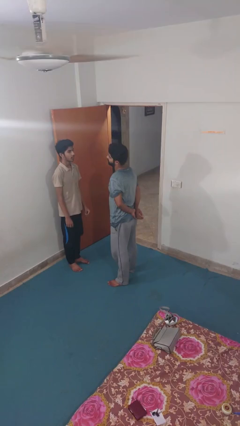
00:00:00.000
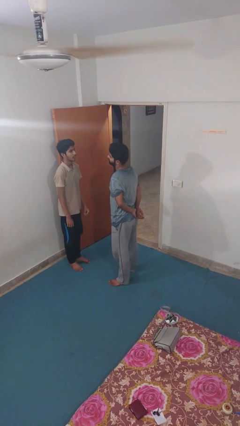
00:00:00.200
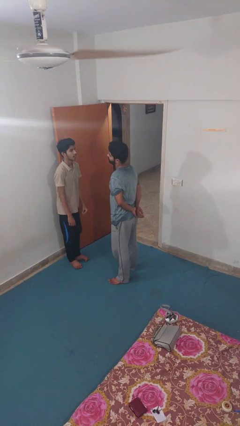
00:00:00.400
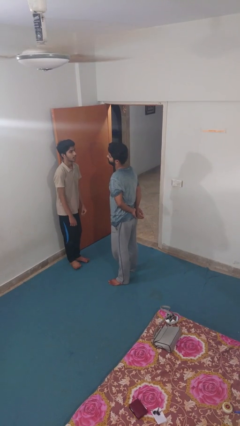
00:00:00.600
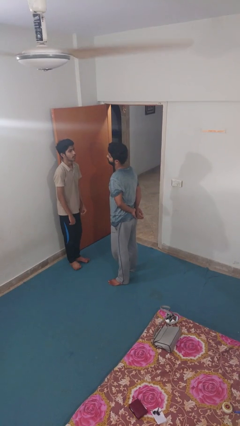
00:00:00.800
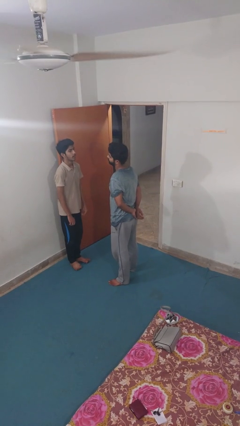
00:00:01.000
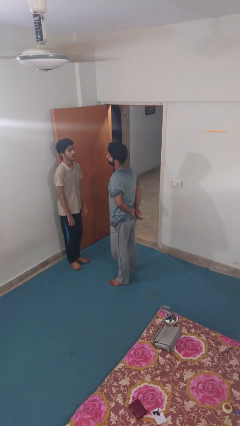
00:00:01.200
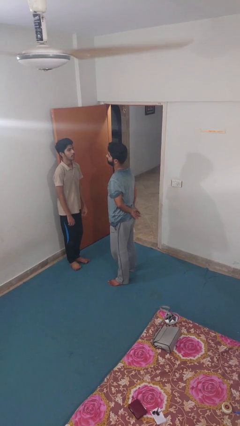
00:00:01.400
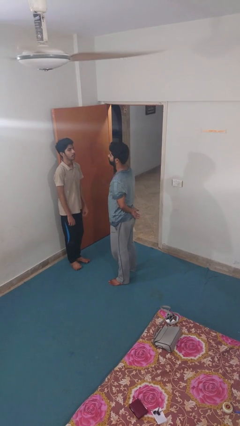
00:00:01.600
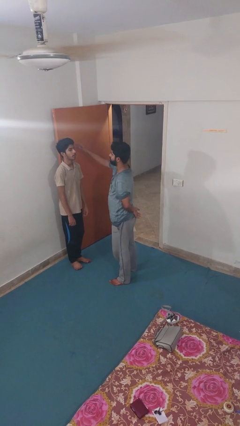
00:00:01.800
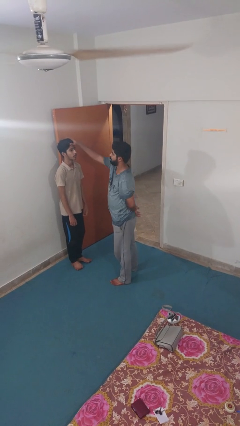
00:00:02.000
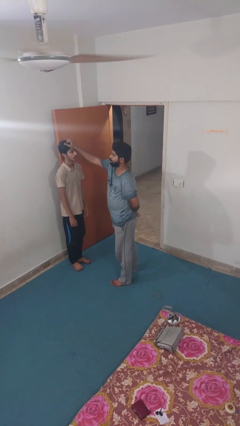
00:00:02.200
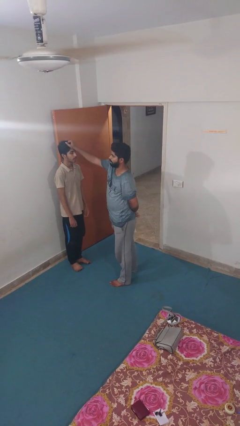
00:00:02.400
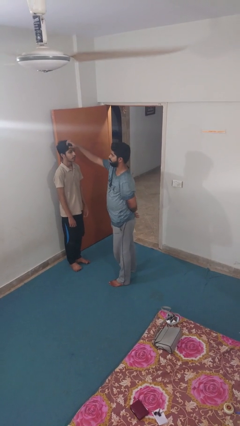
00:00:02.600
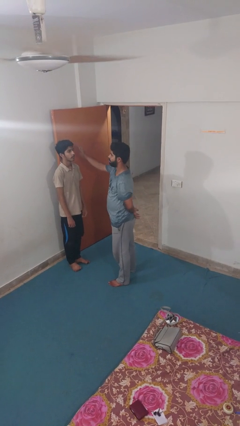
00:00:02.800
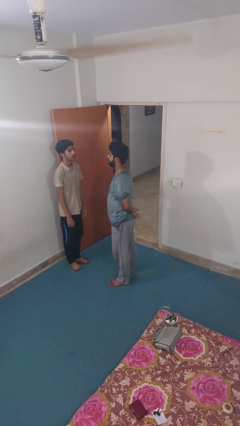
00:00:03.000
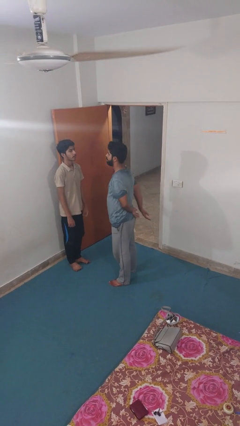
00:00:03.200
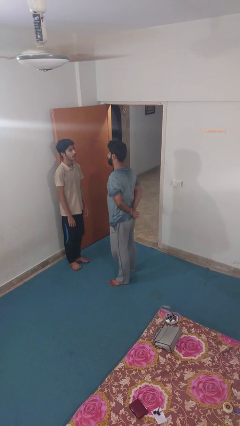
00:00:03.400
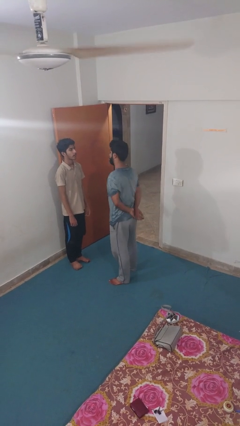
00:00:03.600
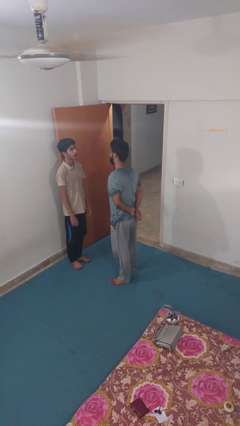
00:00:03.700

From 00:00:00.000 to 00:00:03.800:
person grabs person by hair

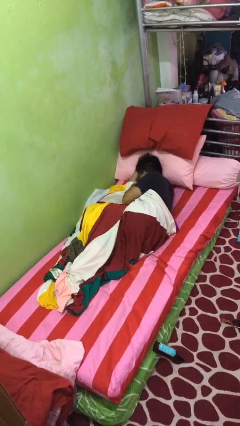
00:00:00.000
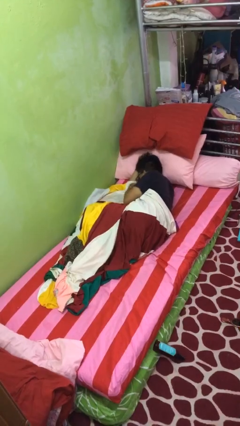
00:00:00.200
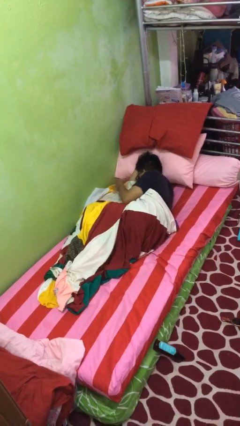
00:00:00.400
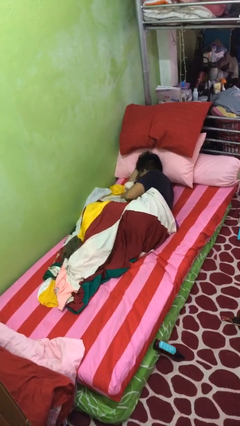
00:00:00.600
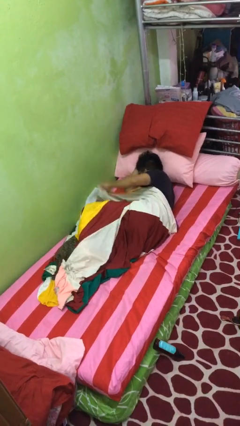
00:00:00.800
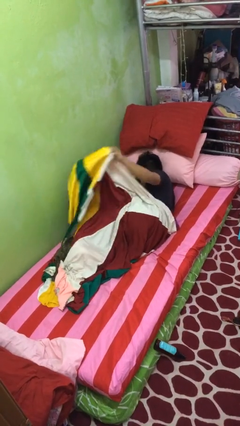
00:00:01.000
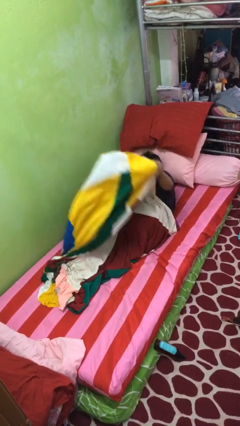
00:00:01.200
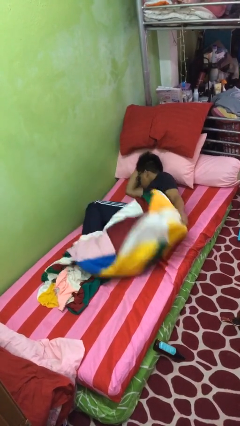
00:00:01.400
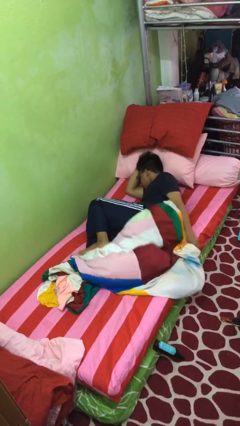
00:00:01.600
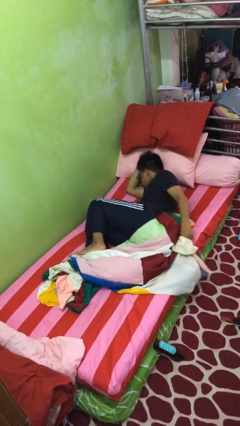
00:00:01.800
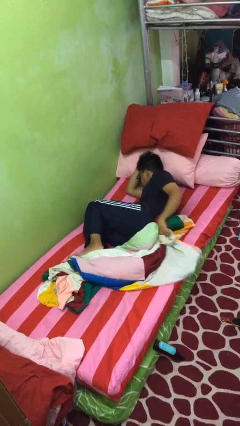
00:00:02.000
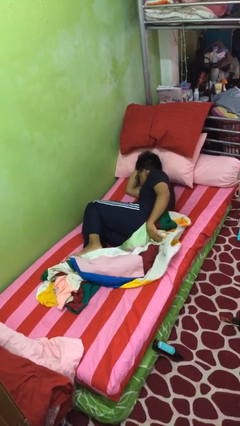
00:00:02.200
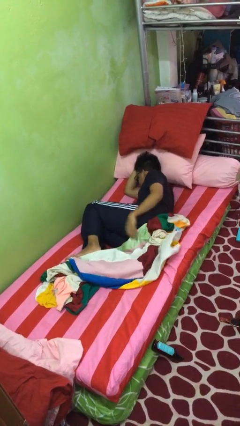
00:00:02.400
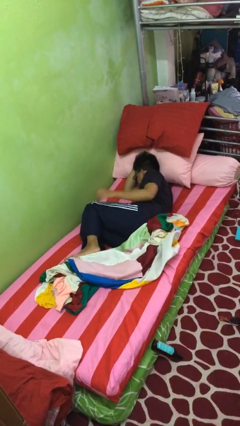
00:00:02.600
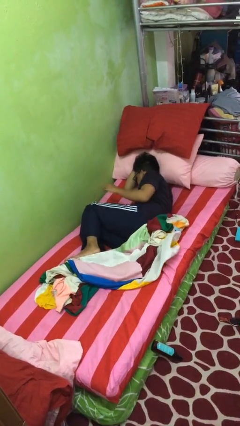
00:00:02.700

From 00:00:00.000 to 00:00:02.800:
person uncovers with blanket

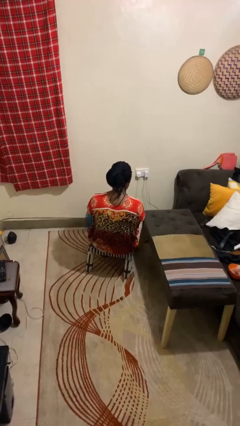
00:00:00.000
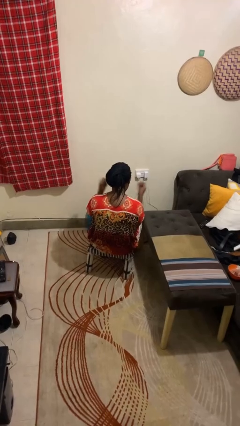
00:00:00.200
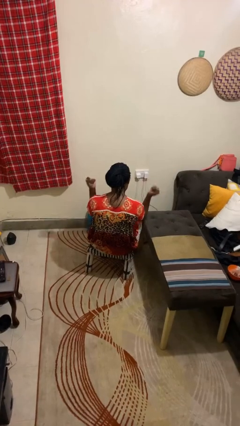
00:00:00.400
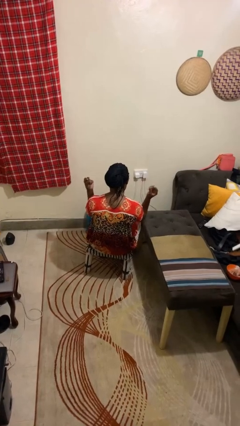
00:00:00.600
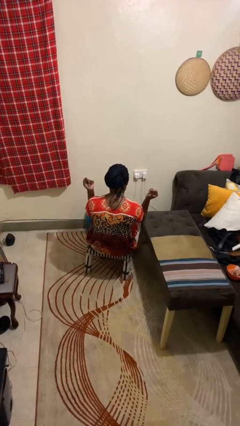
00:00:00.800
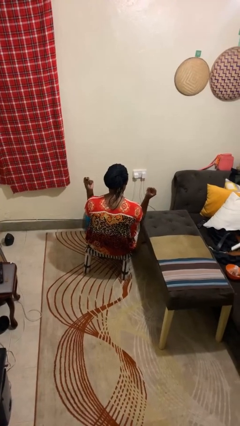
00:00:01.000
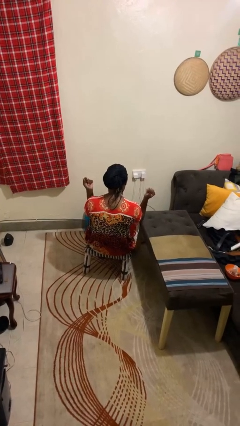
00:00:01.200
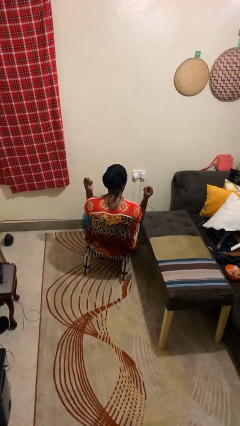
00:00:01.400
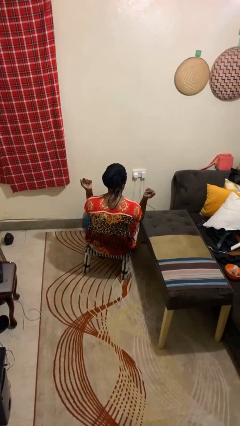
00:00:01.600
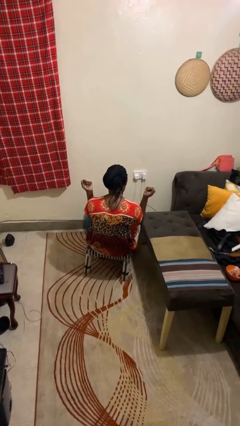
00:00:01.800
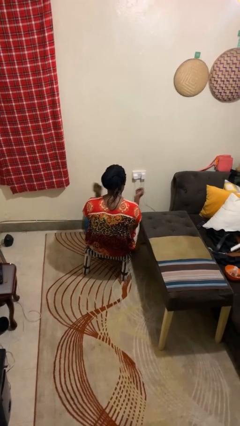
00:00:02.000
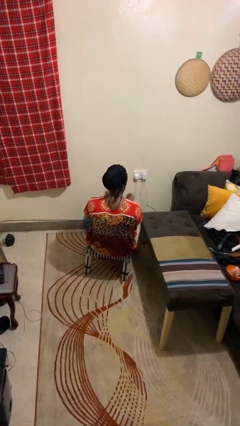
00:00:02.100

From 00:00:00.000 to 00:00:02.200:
person snaps fingers

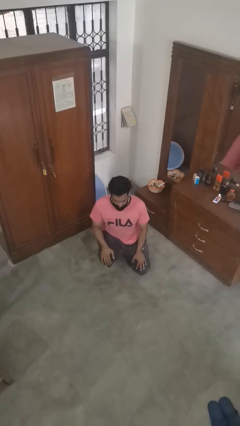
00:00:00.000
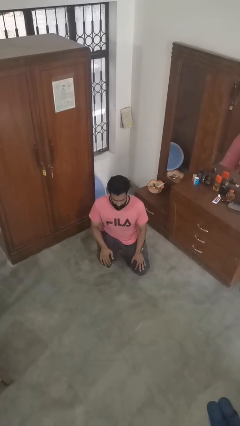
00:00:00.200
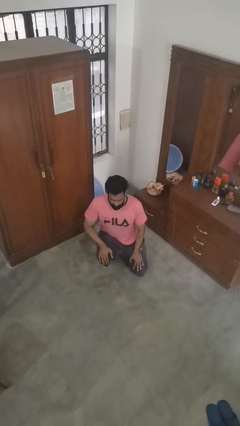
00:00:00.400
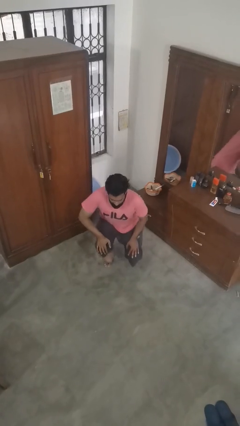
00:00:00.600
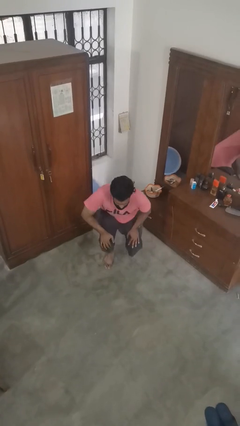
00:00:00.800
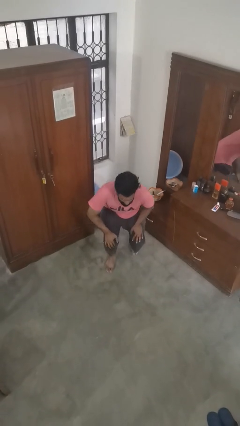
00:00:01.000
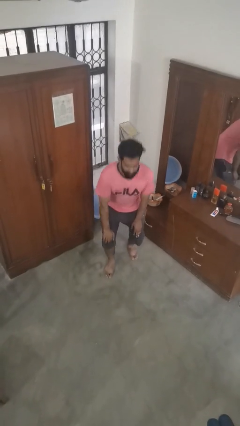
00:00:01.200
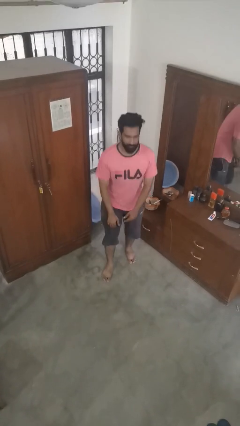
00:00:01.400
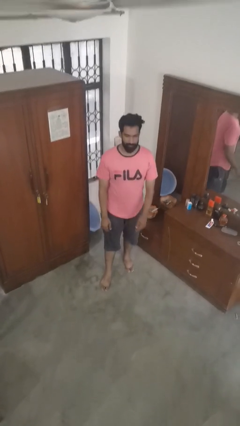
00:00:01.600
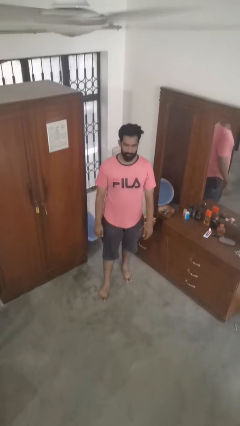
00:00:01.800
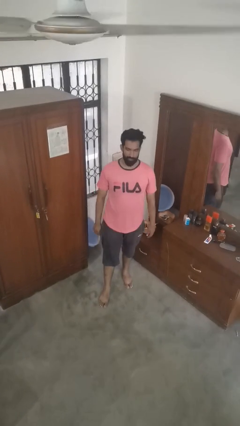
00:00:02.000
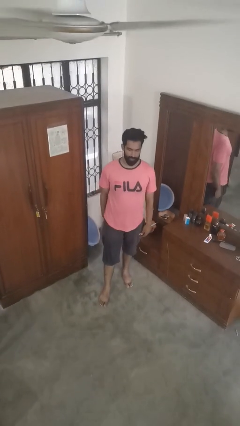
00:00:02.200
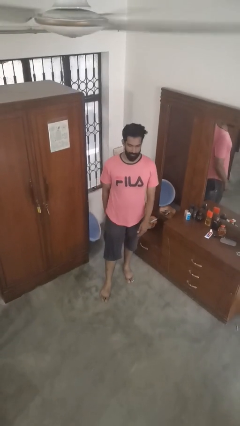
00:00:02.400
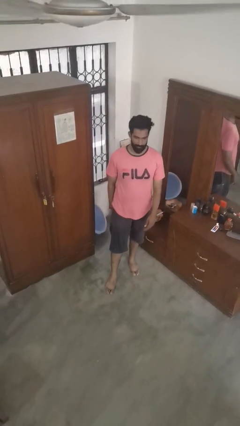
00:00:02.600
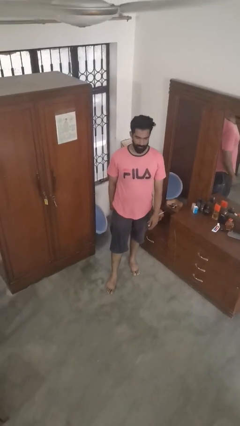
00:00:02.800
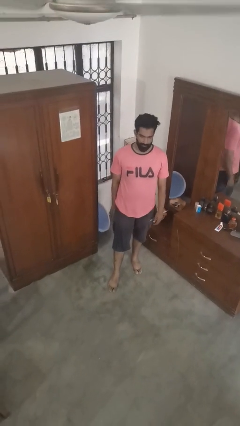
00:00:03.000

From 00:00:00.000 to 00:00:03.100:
person stands up from floor

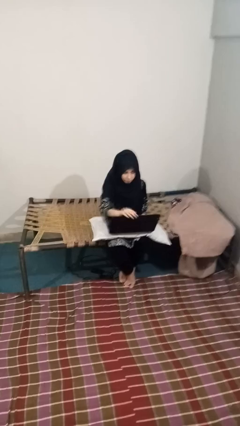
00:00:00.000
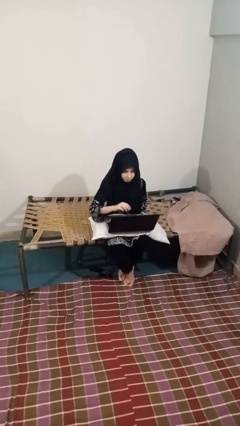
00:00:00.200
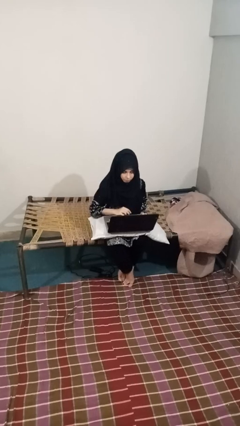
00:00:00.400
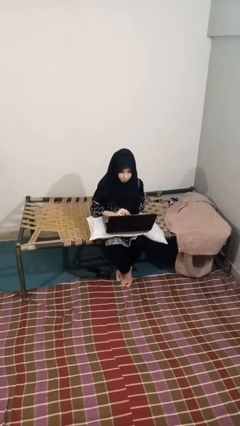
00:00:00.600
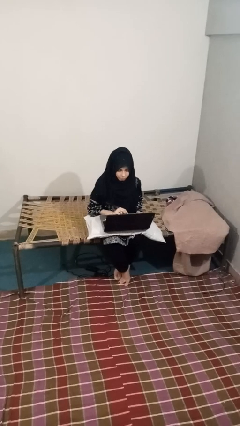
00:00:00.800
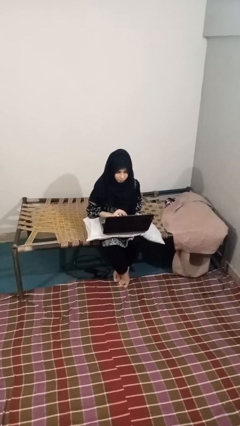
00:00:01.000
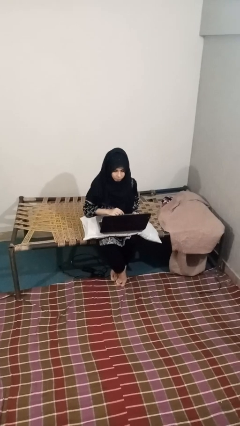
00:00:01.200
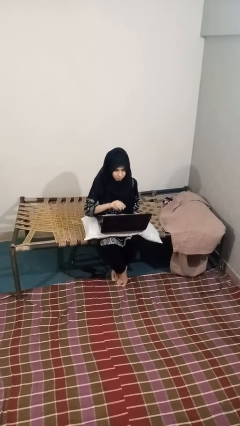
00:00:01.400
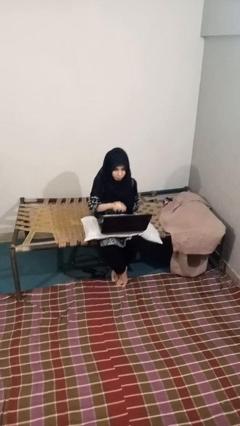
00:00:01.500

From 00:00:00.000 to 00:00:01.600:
person opens laptop

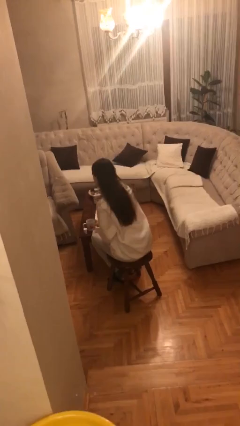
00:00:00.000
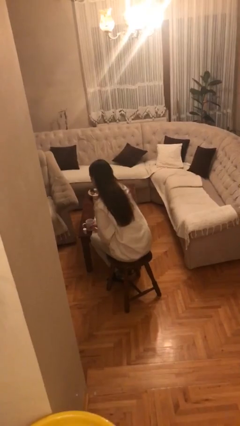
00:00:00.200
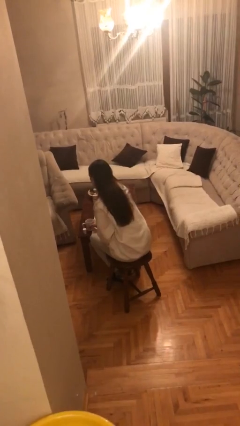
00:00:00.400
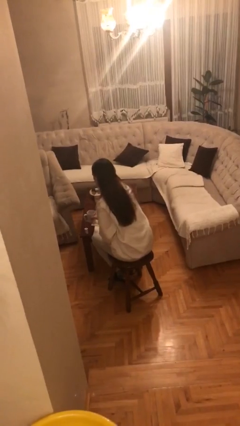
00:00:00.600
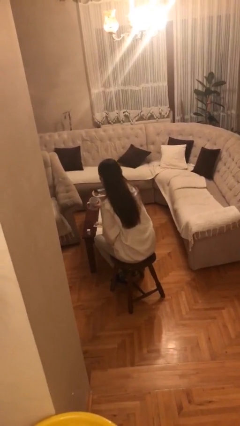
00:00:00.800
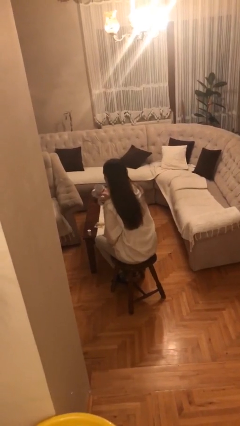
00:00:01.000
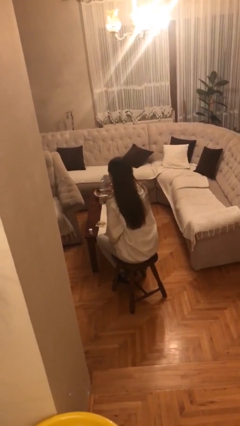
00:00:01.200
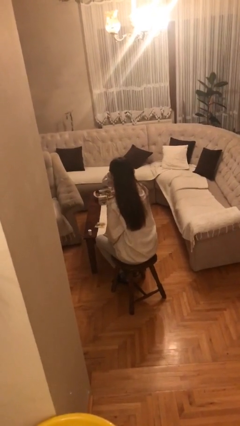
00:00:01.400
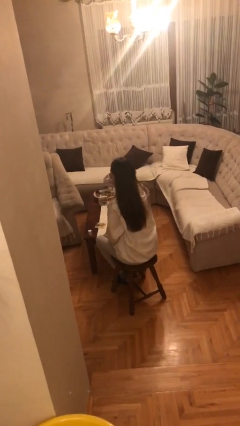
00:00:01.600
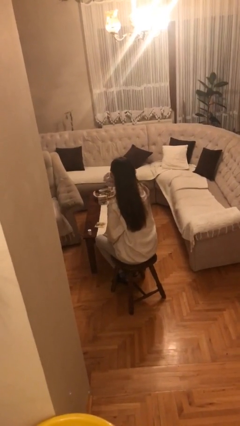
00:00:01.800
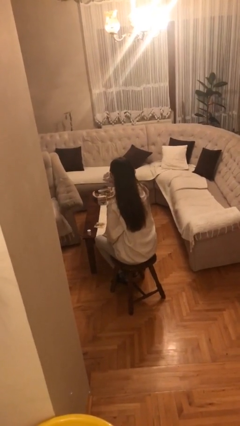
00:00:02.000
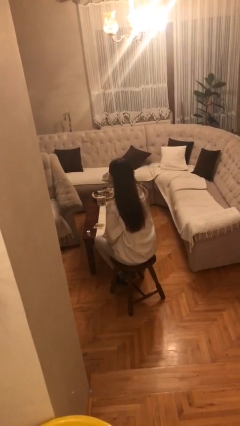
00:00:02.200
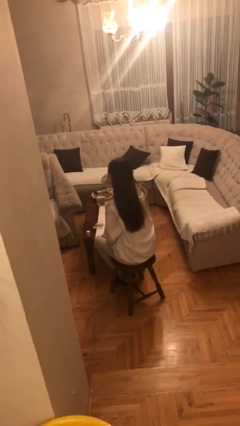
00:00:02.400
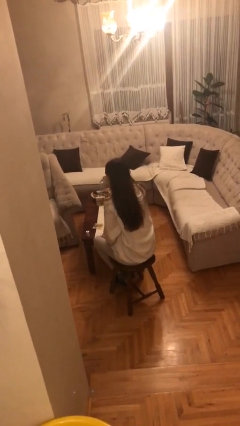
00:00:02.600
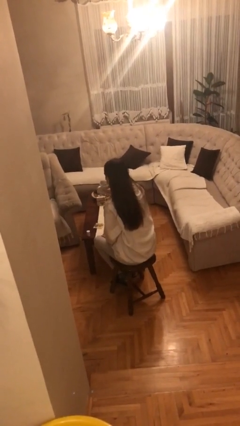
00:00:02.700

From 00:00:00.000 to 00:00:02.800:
person drinks from cup

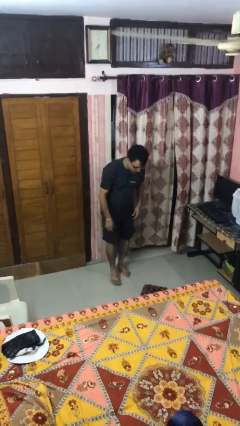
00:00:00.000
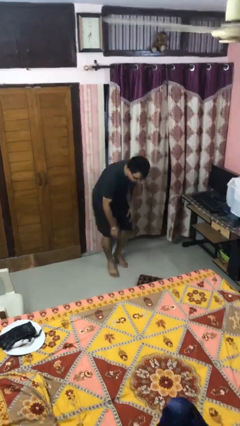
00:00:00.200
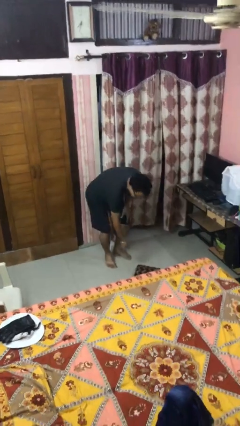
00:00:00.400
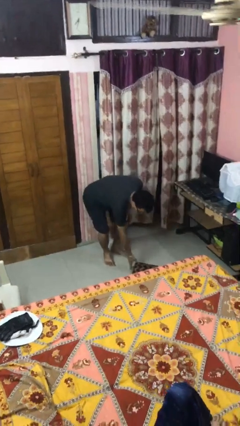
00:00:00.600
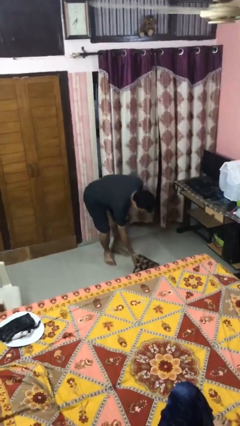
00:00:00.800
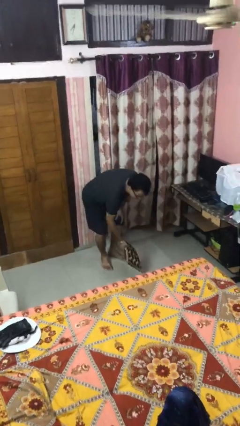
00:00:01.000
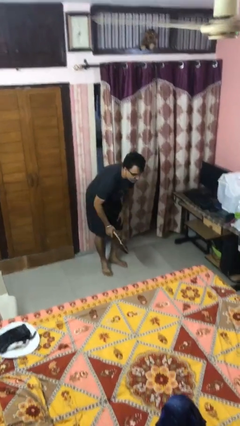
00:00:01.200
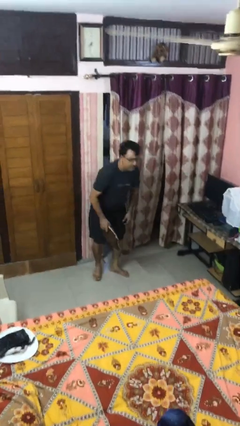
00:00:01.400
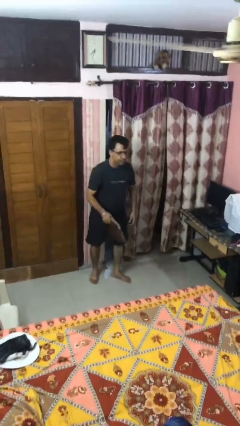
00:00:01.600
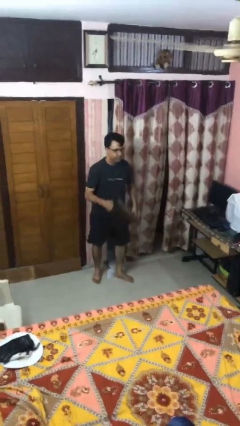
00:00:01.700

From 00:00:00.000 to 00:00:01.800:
person picks up object from floor
